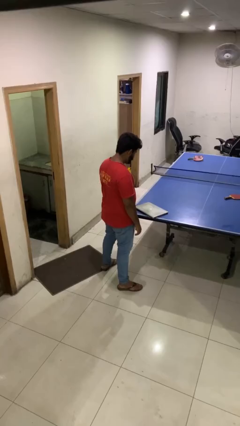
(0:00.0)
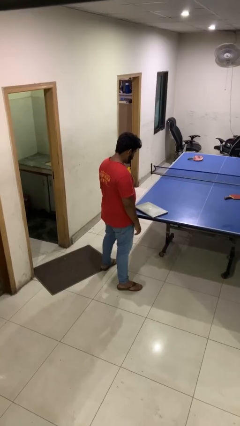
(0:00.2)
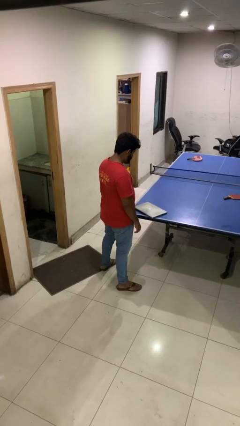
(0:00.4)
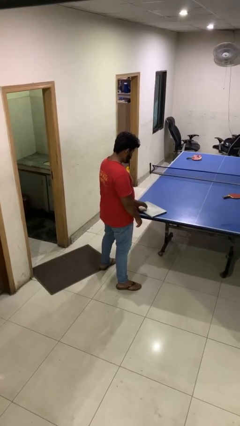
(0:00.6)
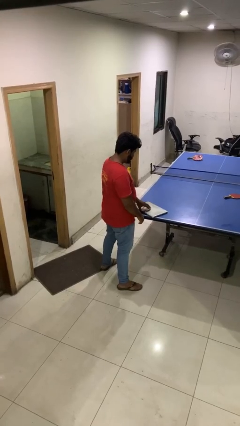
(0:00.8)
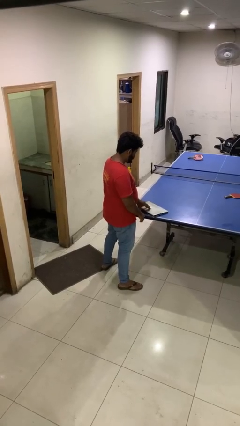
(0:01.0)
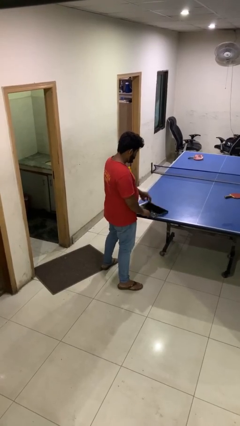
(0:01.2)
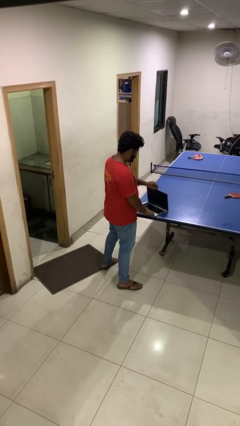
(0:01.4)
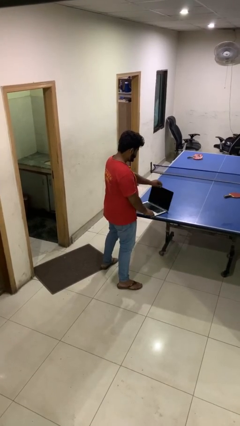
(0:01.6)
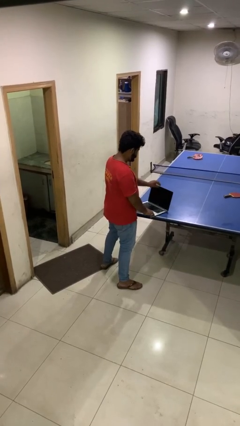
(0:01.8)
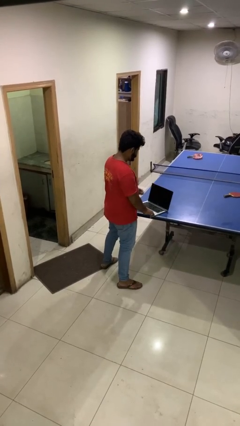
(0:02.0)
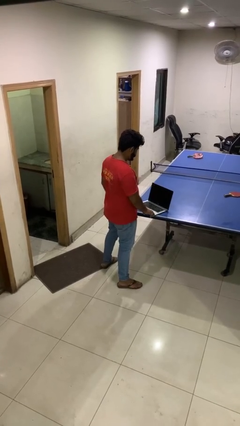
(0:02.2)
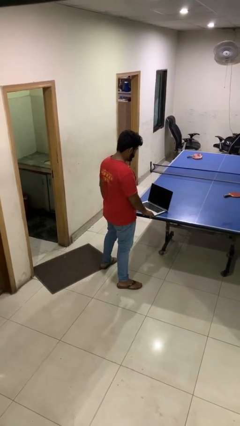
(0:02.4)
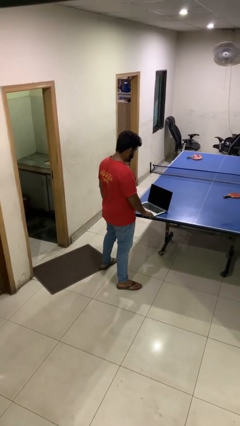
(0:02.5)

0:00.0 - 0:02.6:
person opens laptop

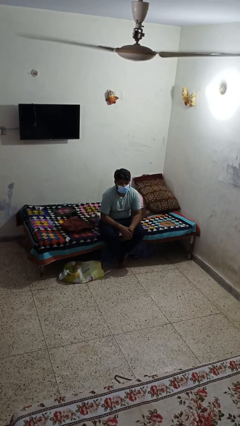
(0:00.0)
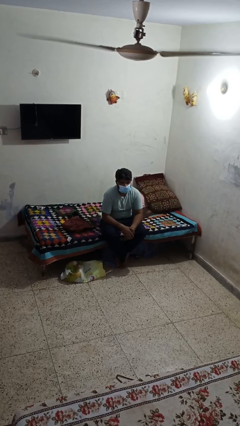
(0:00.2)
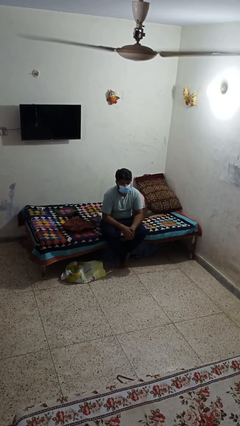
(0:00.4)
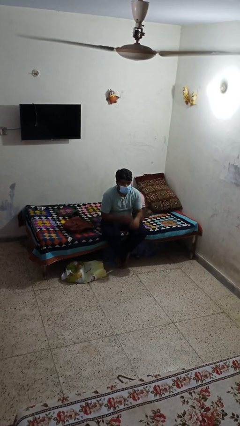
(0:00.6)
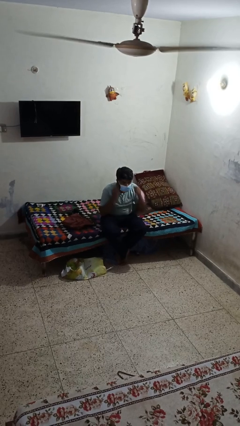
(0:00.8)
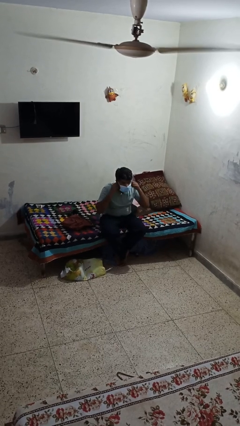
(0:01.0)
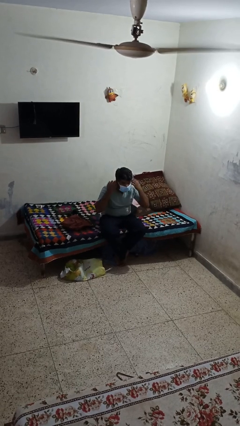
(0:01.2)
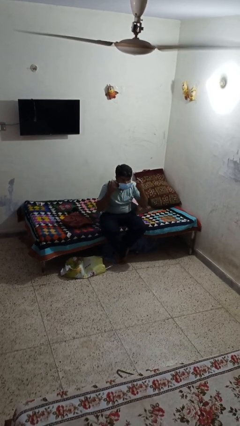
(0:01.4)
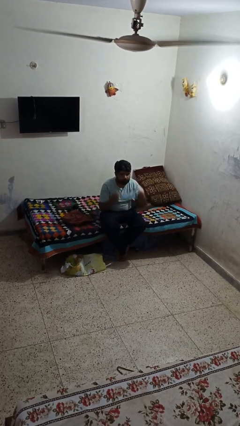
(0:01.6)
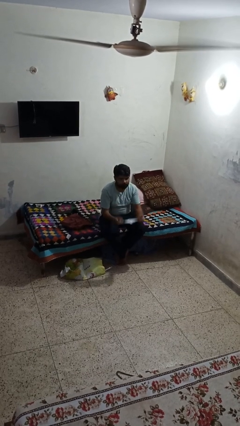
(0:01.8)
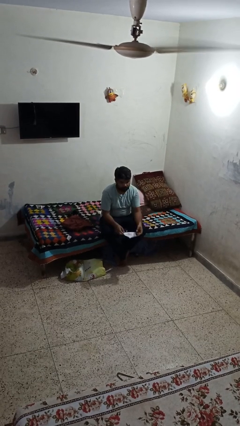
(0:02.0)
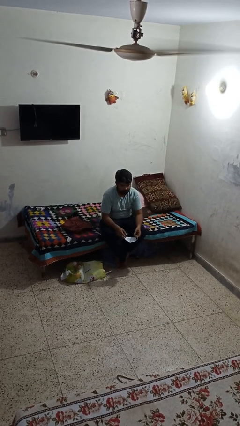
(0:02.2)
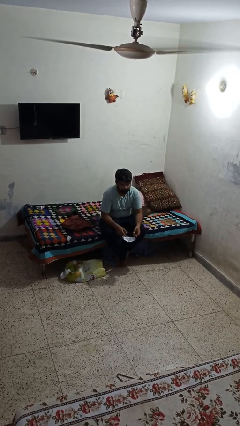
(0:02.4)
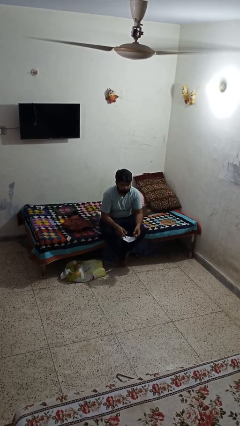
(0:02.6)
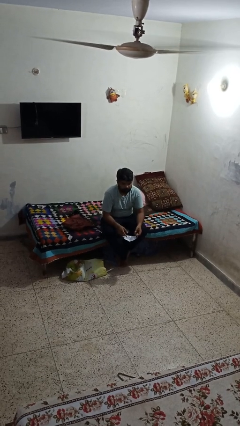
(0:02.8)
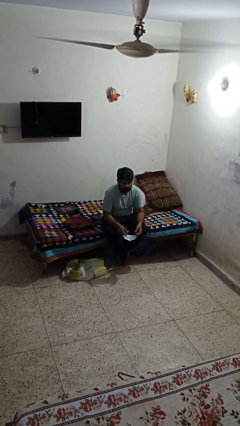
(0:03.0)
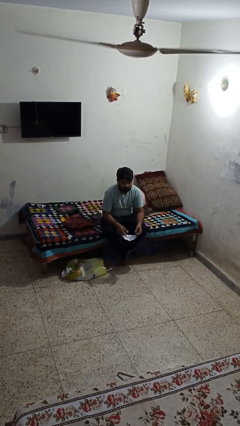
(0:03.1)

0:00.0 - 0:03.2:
person takes off facemask

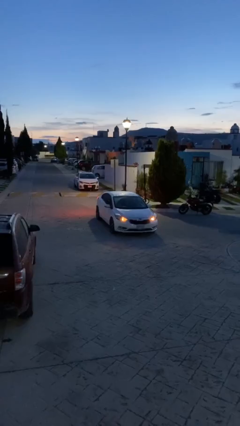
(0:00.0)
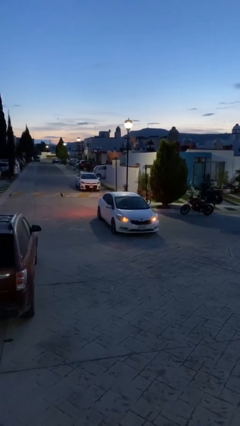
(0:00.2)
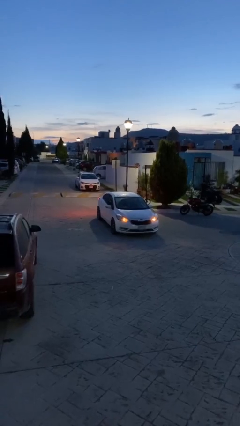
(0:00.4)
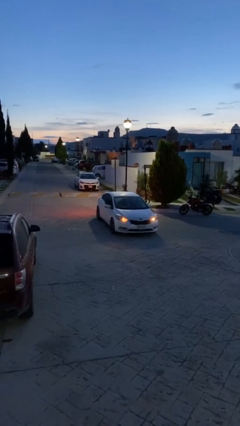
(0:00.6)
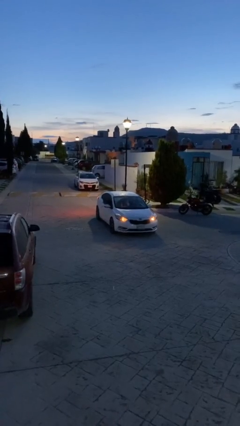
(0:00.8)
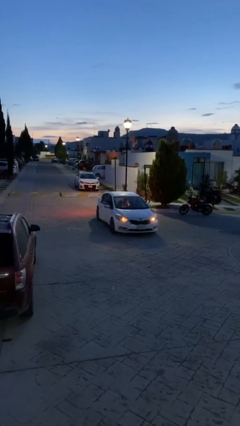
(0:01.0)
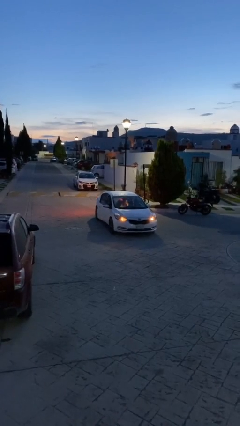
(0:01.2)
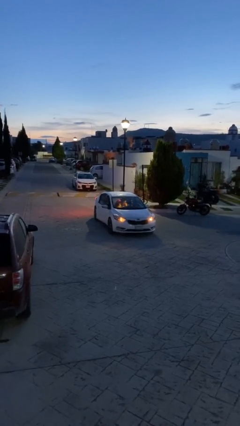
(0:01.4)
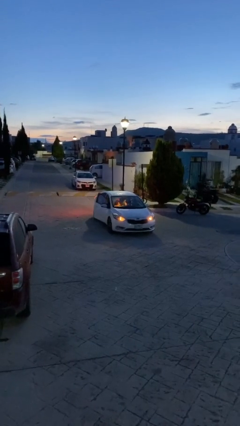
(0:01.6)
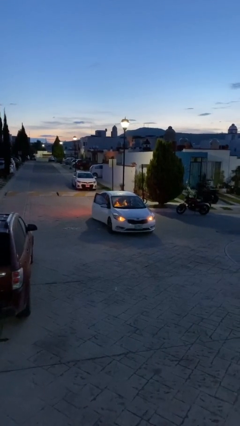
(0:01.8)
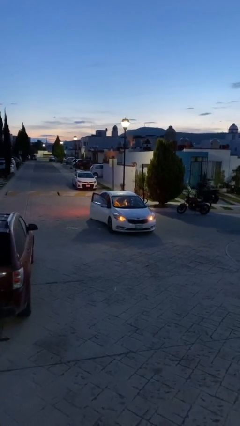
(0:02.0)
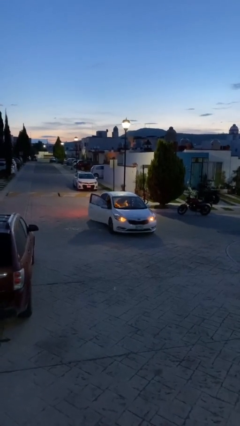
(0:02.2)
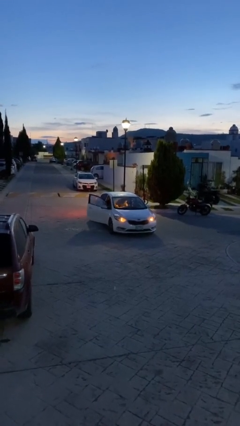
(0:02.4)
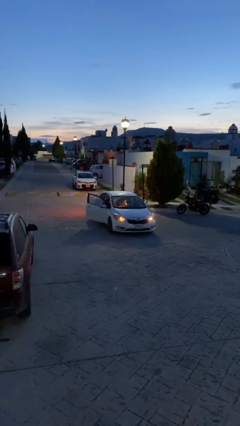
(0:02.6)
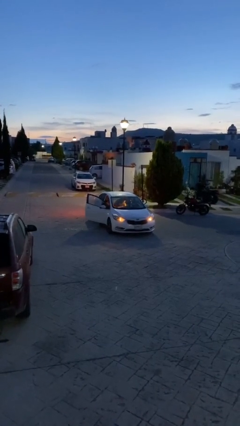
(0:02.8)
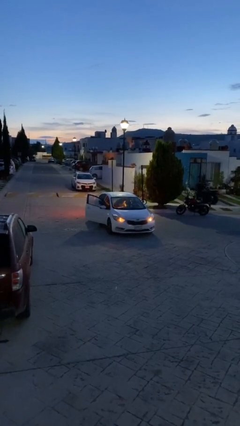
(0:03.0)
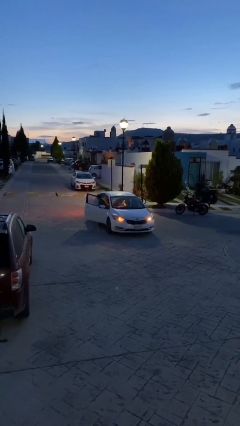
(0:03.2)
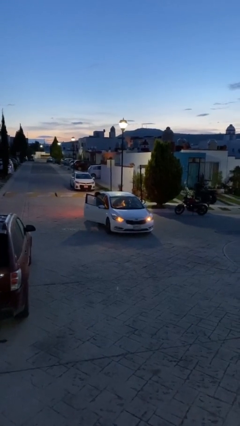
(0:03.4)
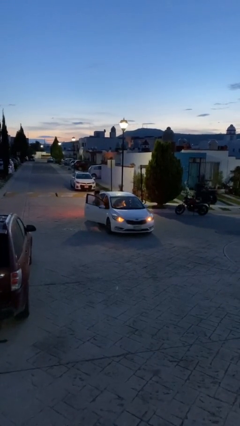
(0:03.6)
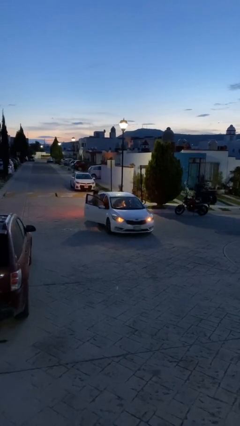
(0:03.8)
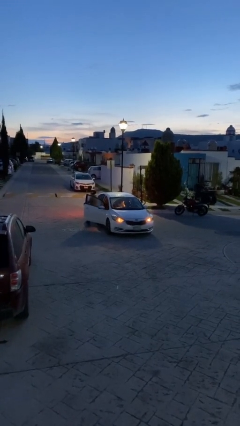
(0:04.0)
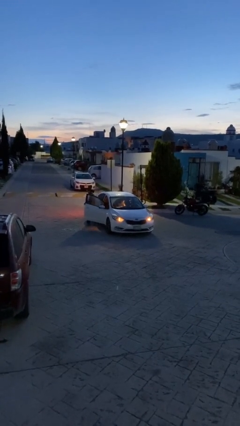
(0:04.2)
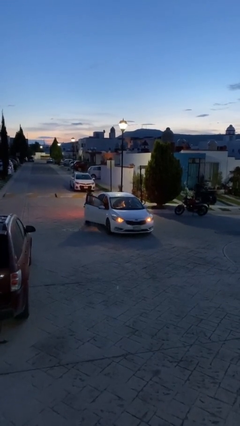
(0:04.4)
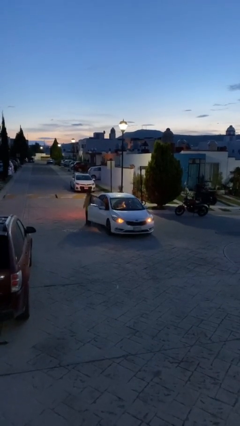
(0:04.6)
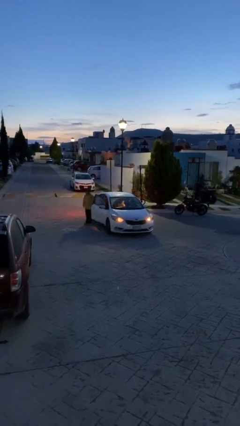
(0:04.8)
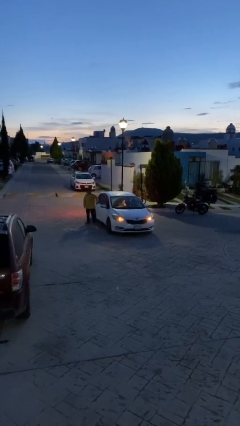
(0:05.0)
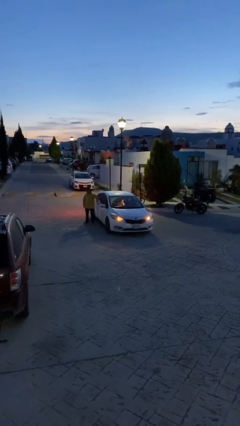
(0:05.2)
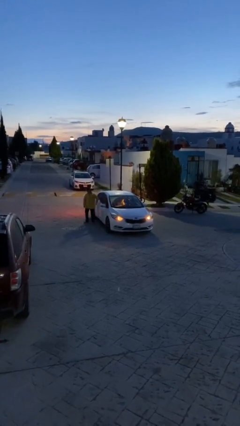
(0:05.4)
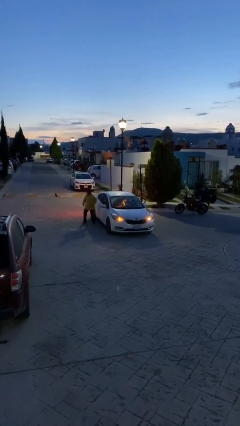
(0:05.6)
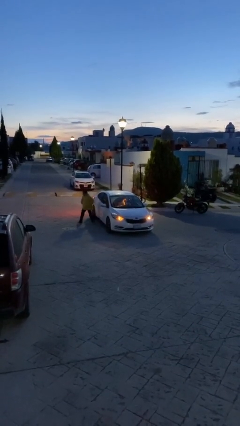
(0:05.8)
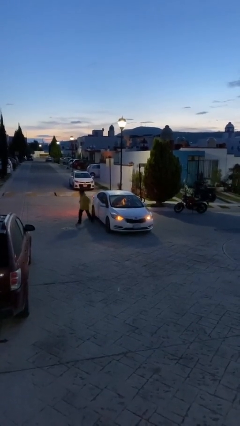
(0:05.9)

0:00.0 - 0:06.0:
car drops off person

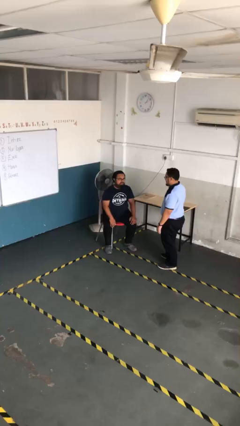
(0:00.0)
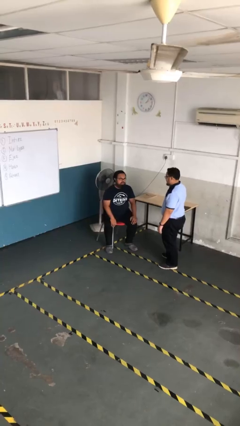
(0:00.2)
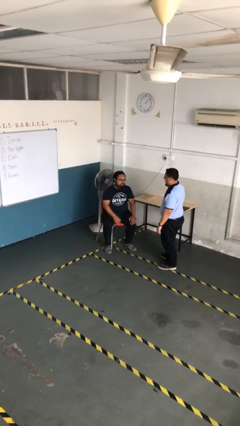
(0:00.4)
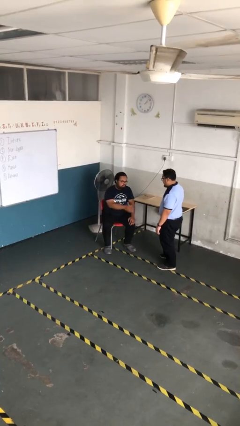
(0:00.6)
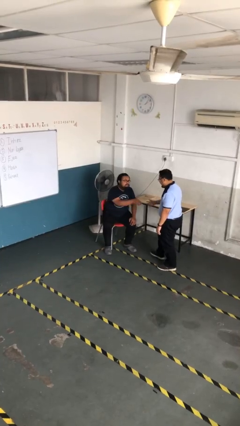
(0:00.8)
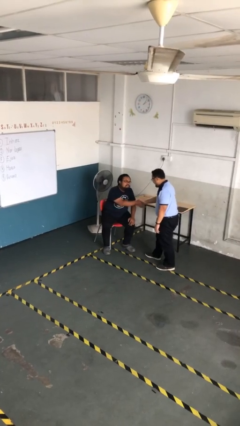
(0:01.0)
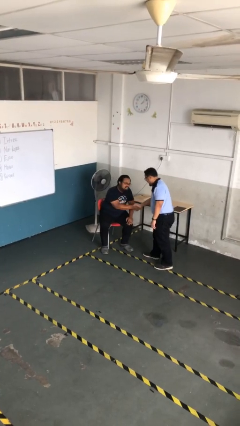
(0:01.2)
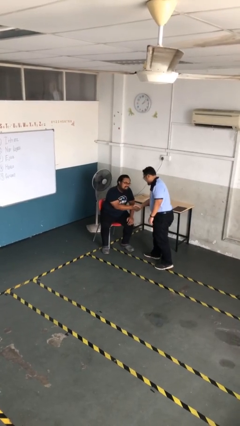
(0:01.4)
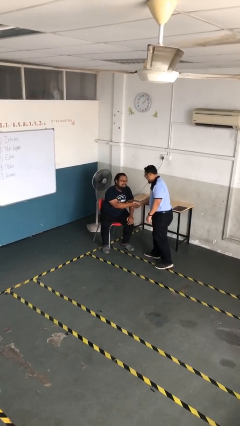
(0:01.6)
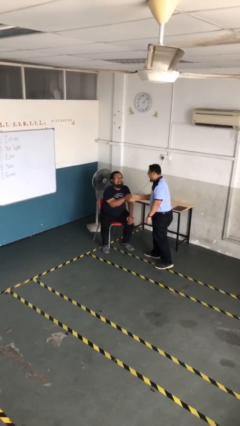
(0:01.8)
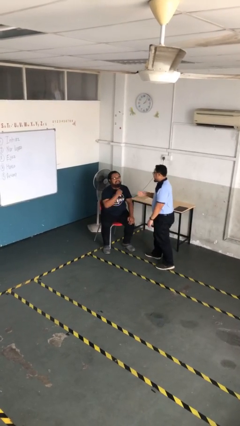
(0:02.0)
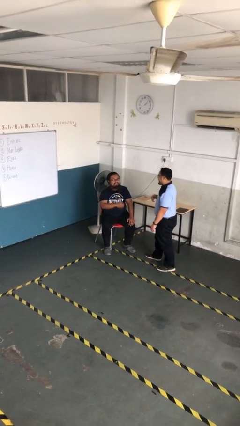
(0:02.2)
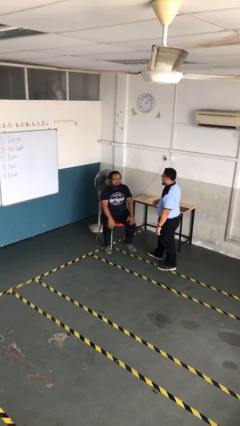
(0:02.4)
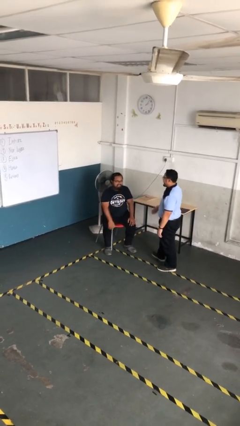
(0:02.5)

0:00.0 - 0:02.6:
person shakes hand

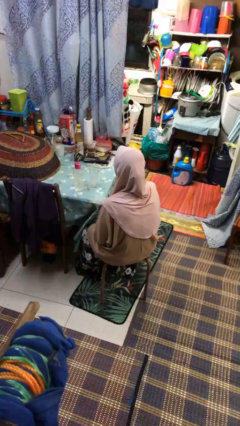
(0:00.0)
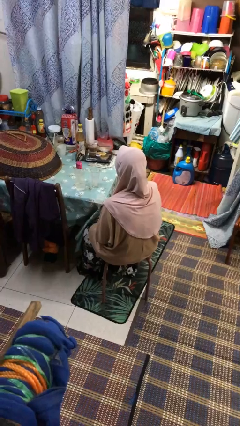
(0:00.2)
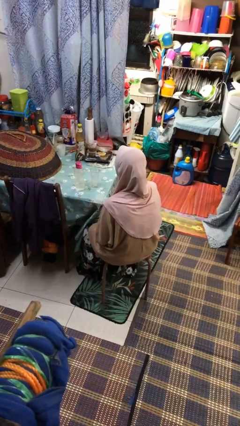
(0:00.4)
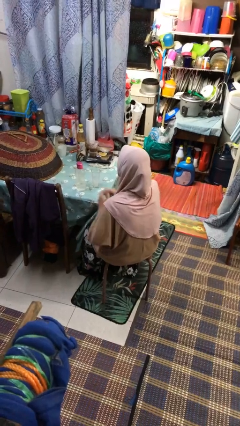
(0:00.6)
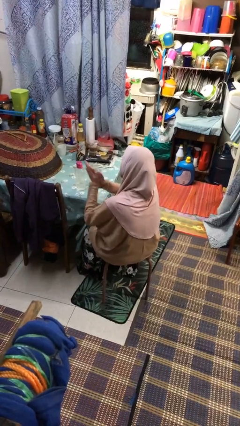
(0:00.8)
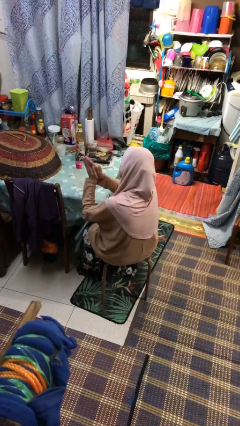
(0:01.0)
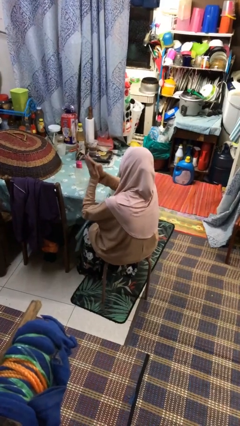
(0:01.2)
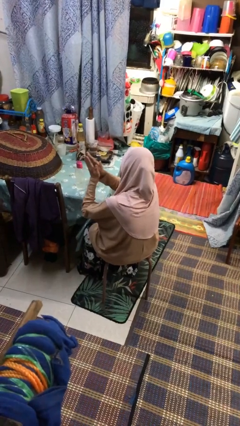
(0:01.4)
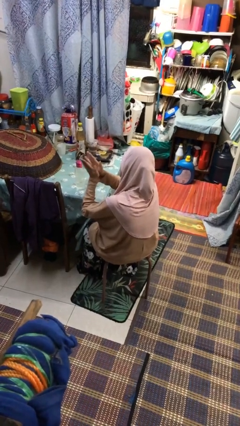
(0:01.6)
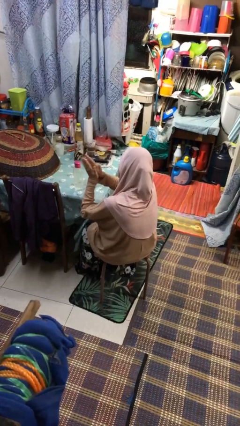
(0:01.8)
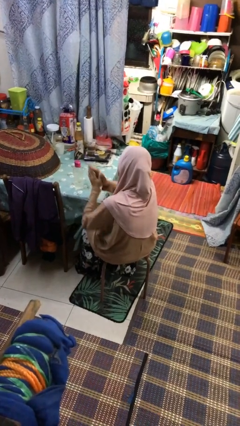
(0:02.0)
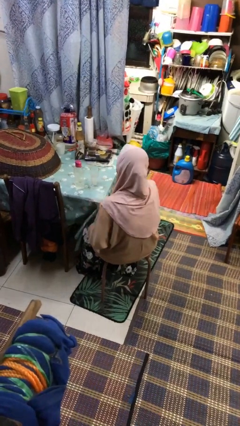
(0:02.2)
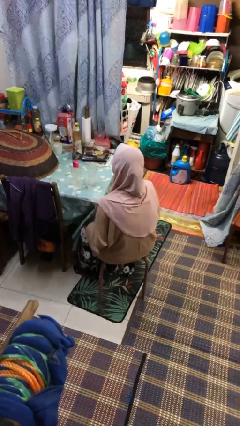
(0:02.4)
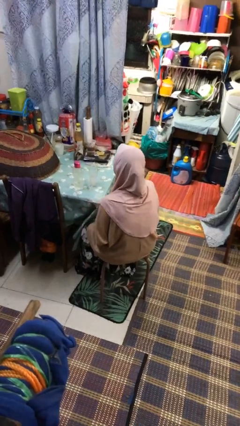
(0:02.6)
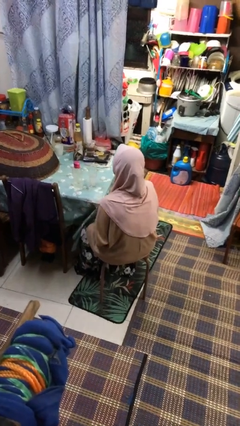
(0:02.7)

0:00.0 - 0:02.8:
person claps hands
